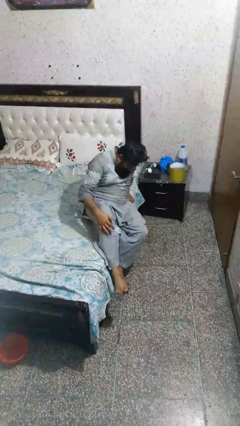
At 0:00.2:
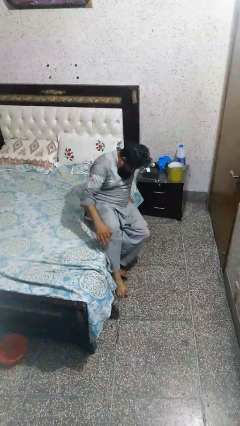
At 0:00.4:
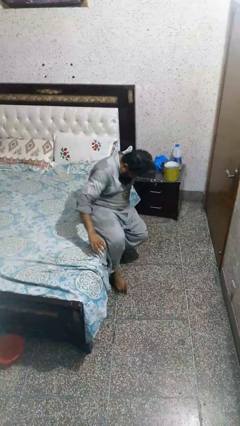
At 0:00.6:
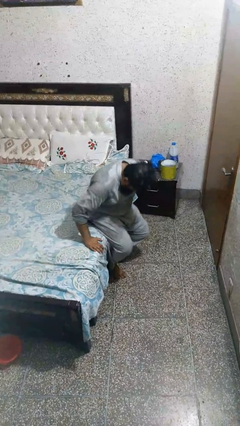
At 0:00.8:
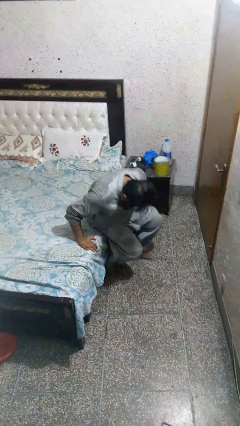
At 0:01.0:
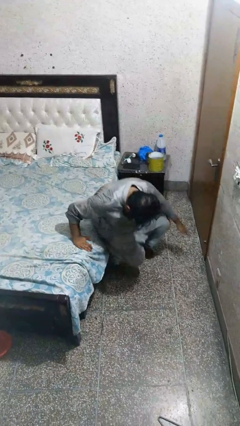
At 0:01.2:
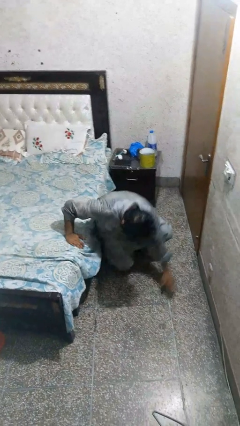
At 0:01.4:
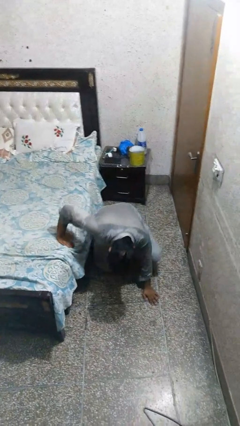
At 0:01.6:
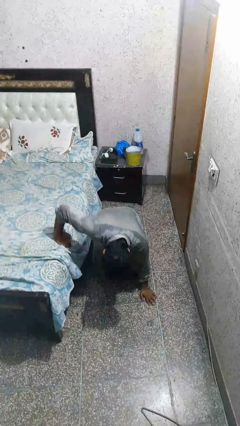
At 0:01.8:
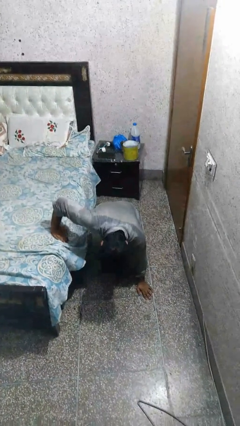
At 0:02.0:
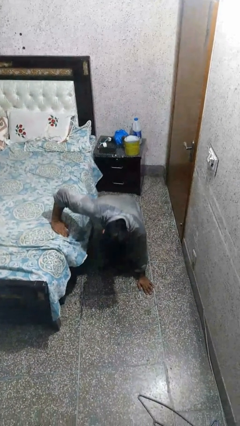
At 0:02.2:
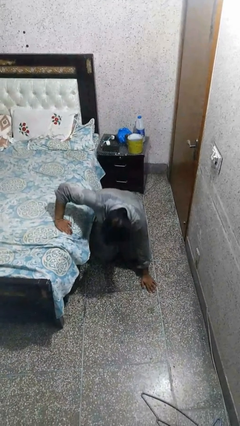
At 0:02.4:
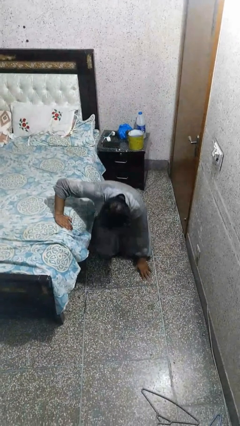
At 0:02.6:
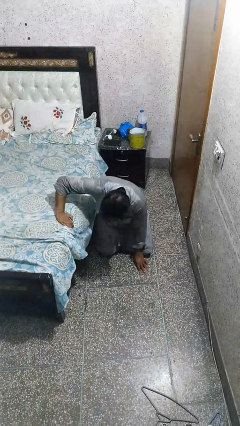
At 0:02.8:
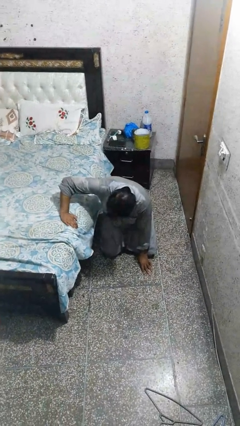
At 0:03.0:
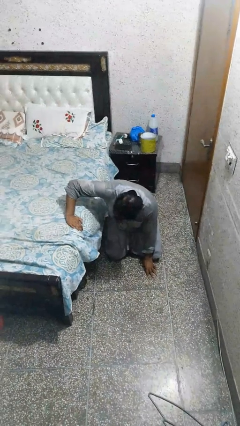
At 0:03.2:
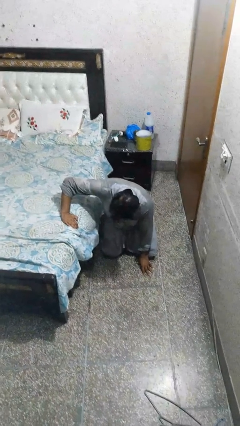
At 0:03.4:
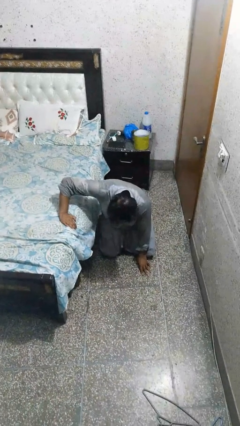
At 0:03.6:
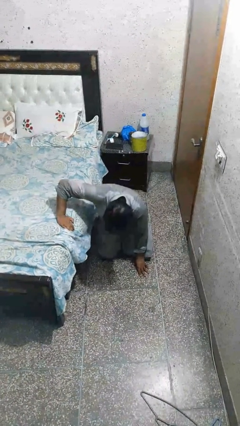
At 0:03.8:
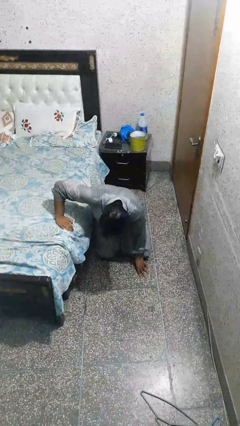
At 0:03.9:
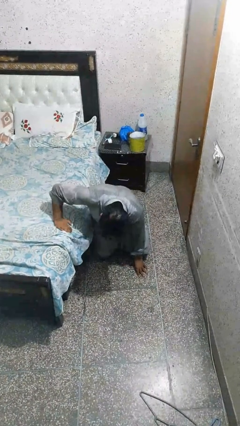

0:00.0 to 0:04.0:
person falls from bed

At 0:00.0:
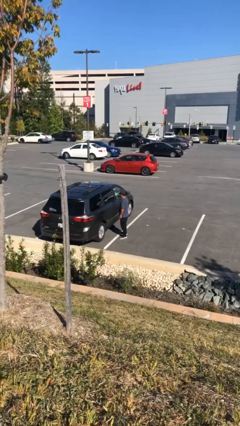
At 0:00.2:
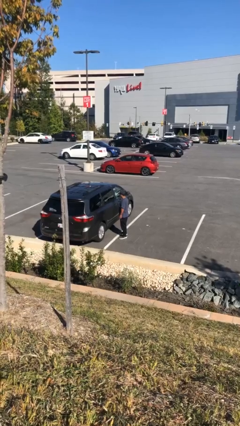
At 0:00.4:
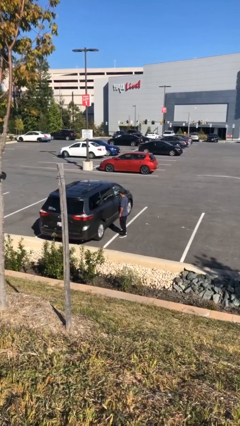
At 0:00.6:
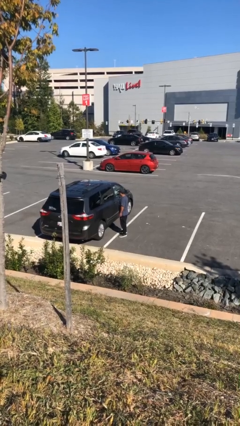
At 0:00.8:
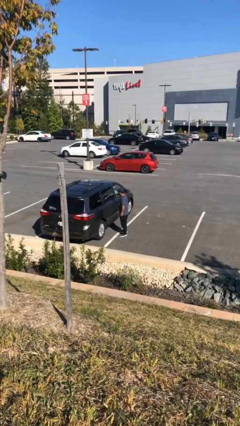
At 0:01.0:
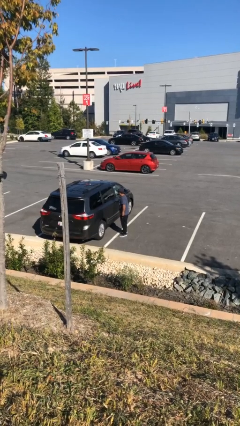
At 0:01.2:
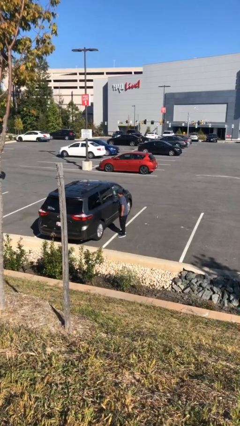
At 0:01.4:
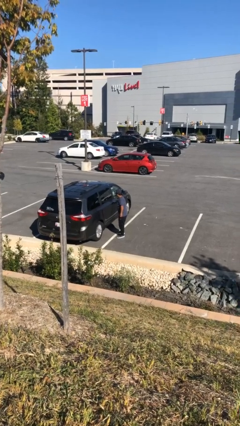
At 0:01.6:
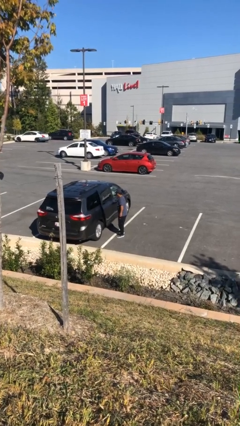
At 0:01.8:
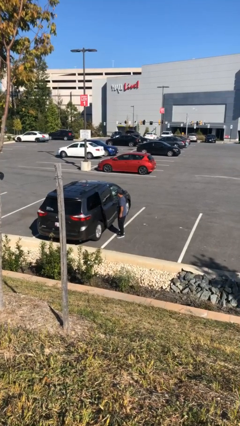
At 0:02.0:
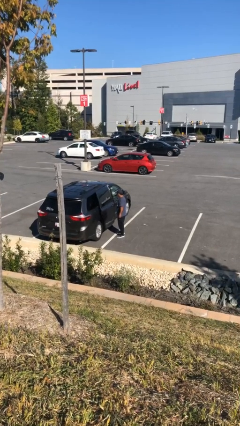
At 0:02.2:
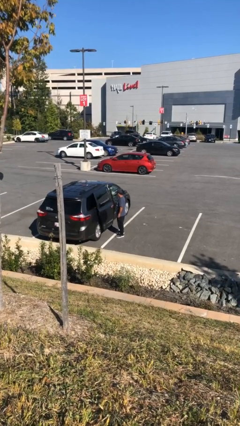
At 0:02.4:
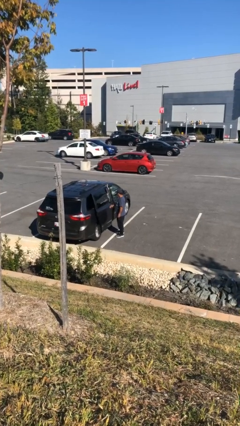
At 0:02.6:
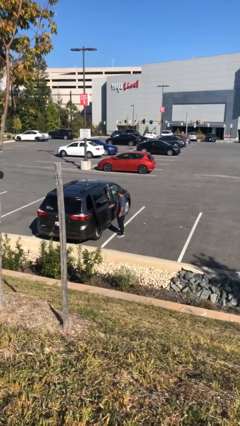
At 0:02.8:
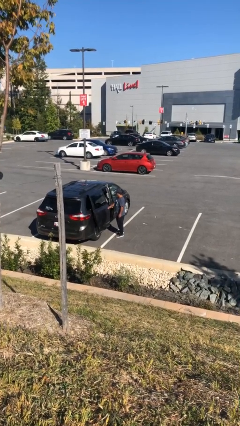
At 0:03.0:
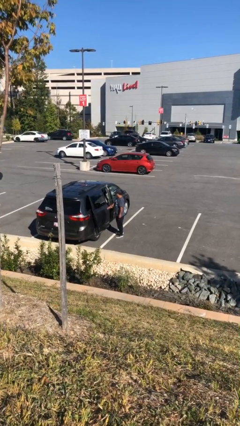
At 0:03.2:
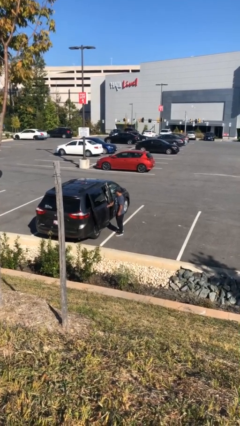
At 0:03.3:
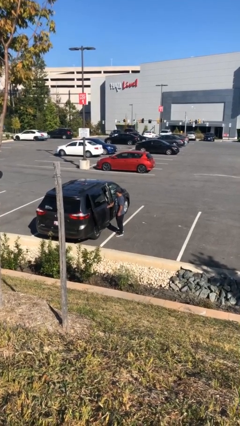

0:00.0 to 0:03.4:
person opens car door

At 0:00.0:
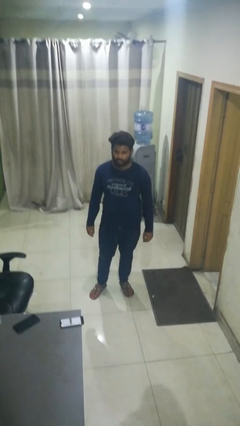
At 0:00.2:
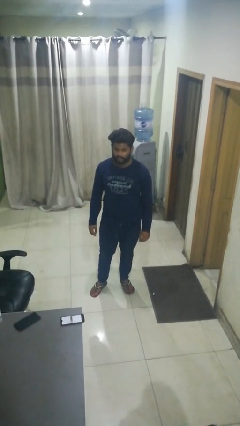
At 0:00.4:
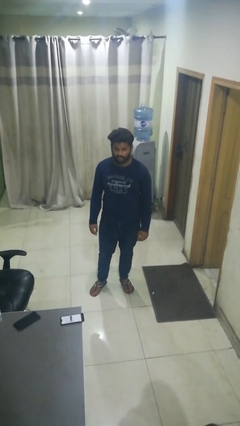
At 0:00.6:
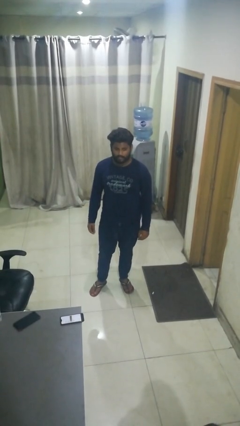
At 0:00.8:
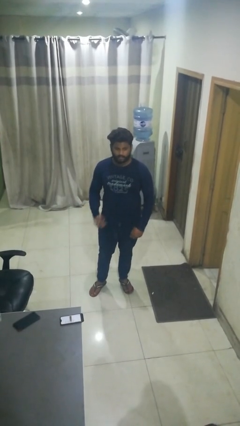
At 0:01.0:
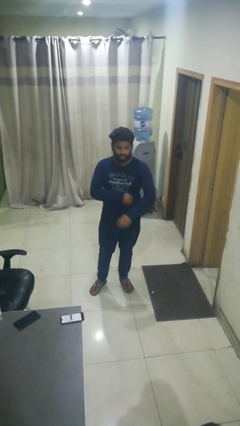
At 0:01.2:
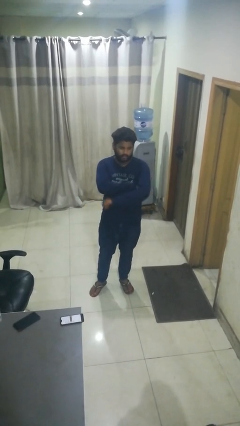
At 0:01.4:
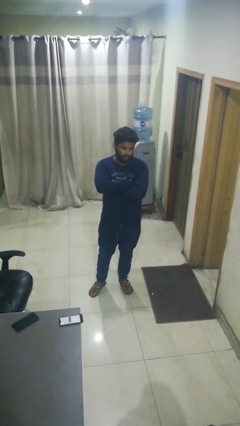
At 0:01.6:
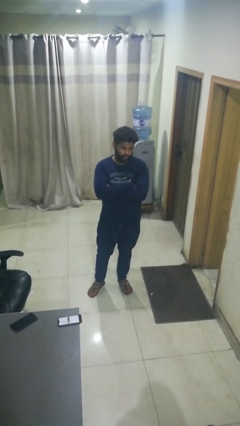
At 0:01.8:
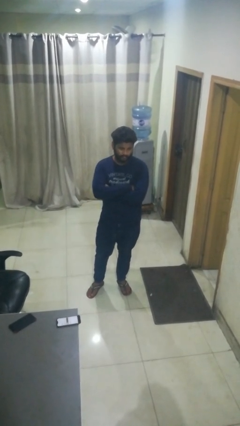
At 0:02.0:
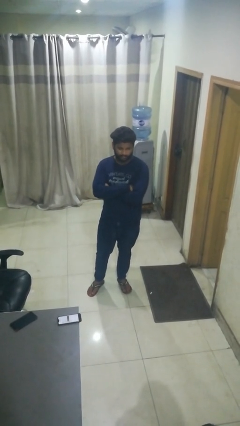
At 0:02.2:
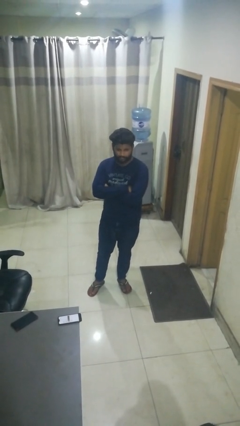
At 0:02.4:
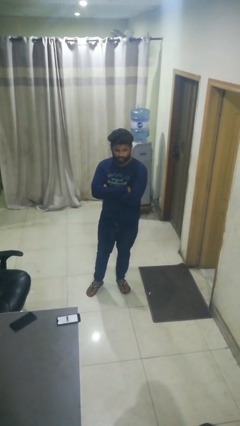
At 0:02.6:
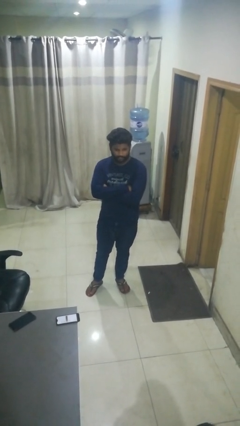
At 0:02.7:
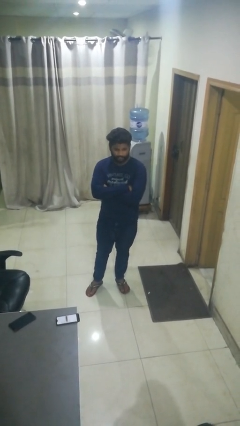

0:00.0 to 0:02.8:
person crosses arms

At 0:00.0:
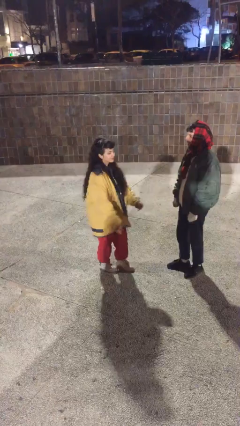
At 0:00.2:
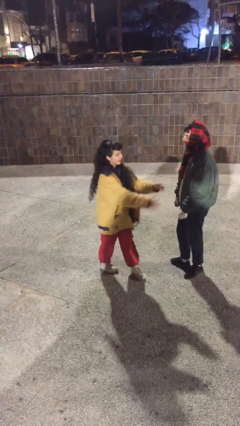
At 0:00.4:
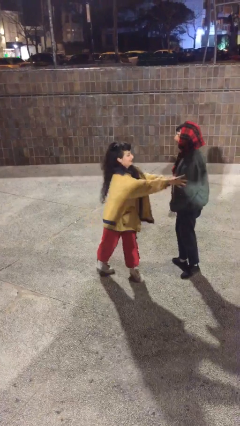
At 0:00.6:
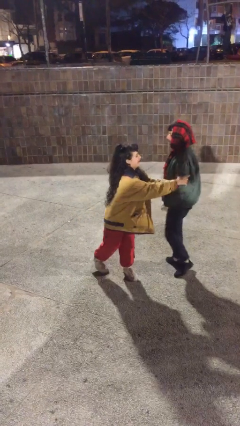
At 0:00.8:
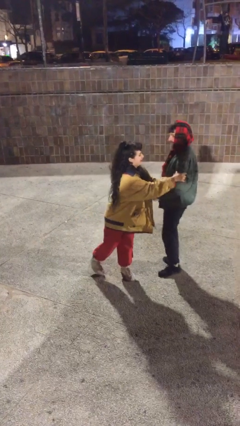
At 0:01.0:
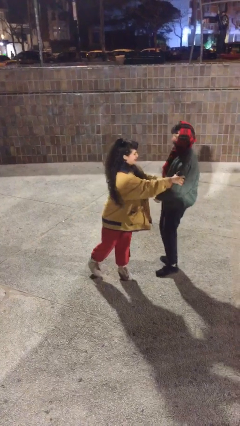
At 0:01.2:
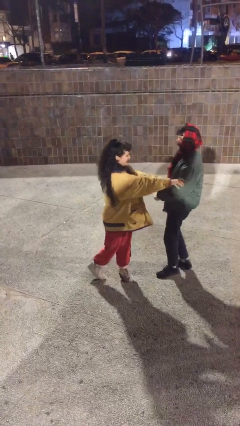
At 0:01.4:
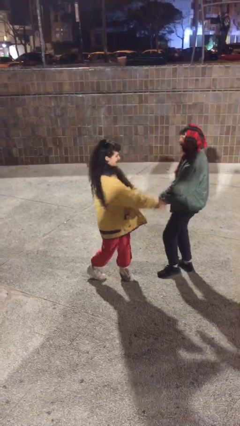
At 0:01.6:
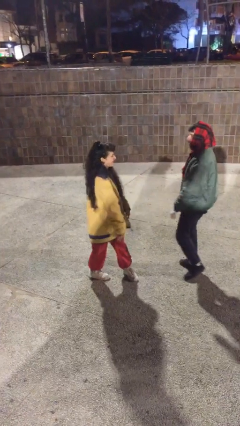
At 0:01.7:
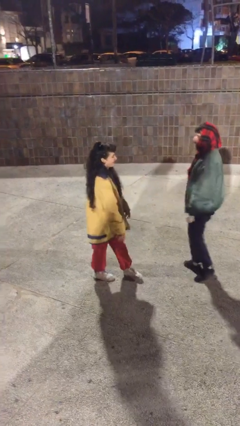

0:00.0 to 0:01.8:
person grabs person by bicep

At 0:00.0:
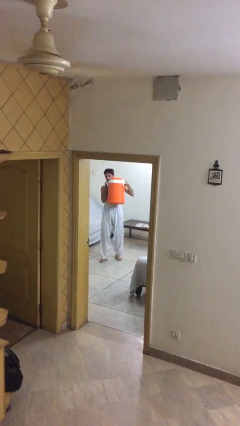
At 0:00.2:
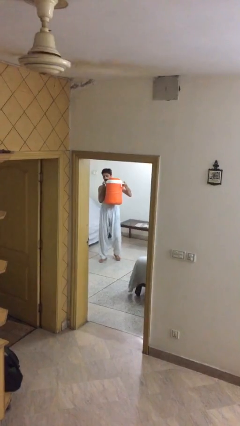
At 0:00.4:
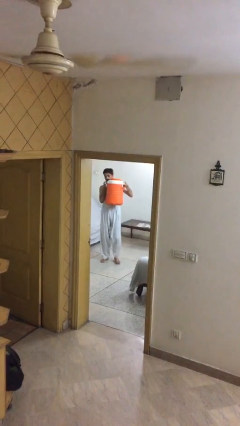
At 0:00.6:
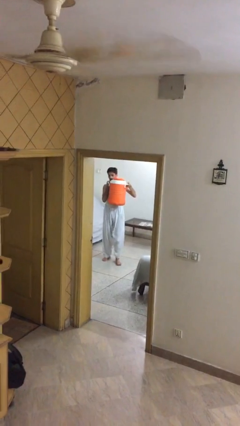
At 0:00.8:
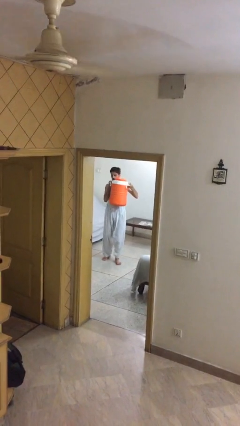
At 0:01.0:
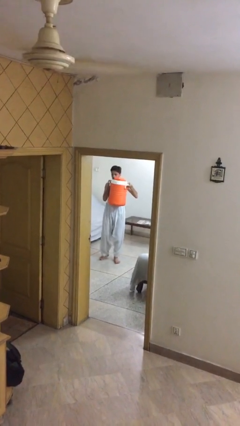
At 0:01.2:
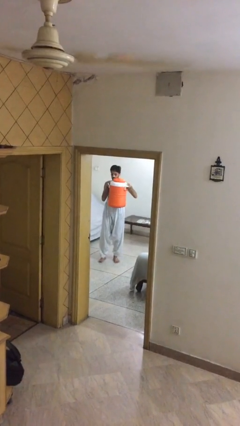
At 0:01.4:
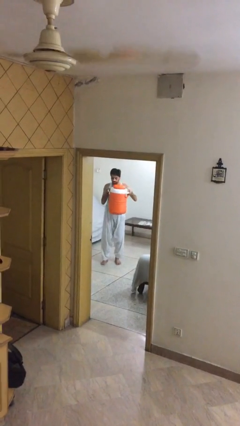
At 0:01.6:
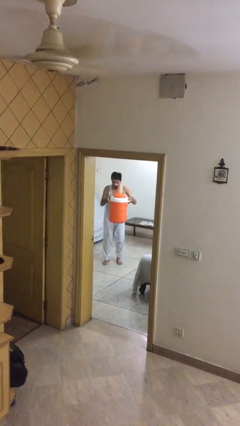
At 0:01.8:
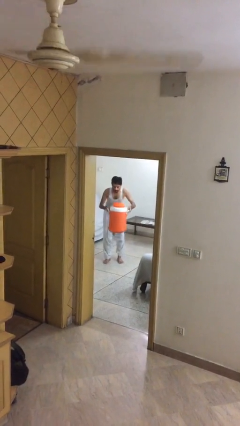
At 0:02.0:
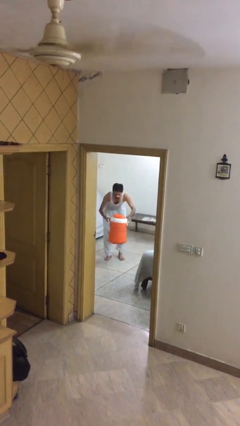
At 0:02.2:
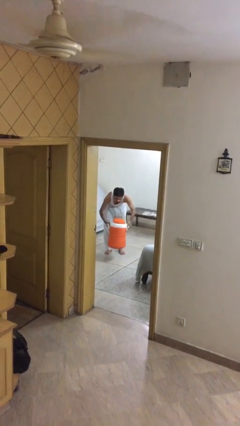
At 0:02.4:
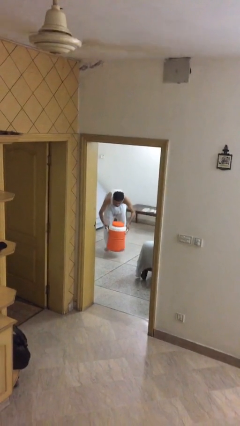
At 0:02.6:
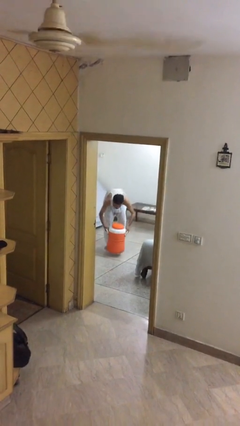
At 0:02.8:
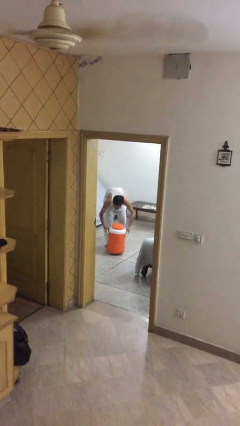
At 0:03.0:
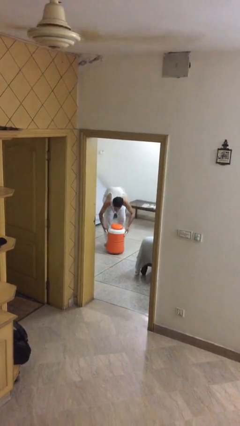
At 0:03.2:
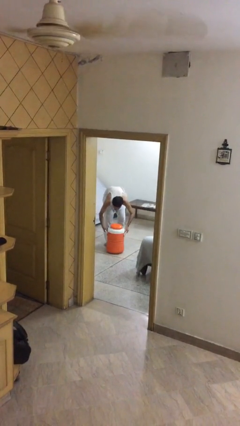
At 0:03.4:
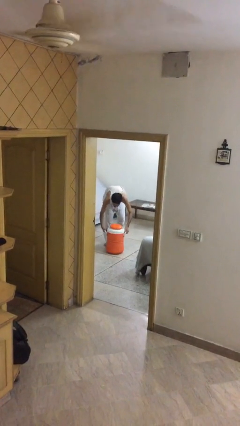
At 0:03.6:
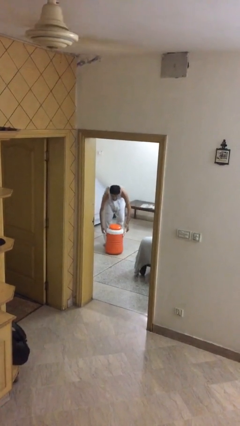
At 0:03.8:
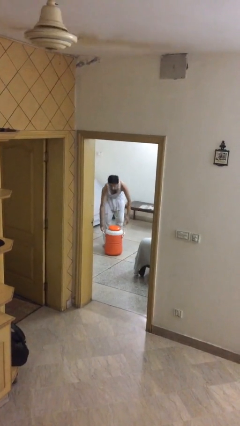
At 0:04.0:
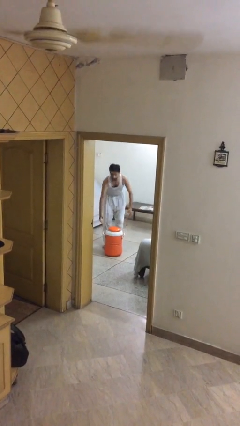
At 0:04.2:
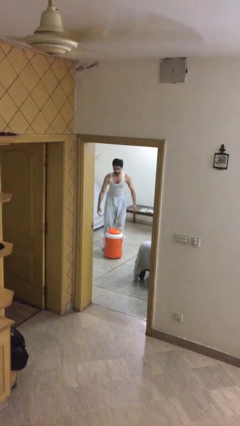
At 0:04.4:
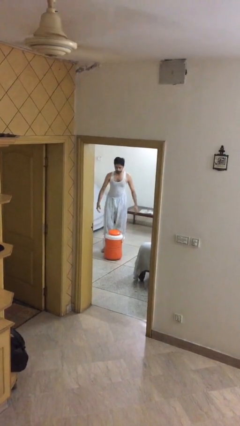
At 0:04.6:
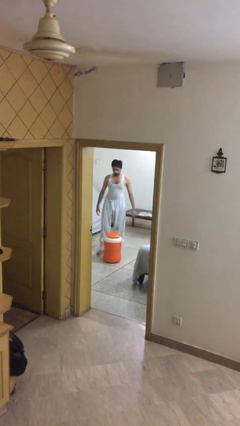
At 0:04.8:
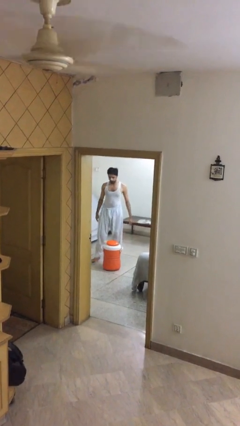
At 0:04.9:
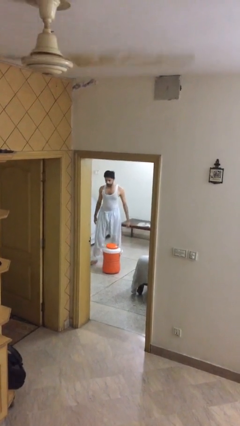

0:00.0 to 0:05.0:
person puts down object on floor

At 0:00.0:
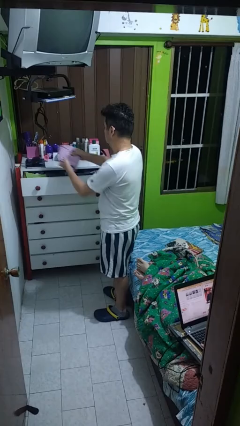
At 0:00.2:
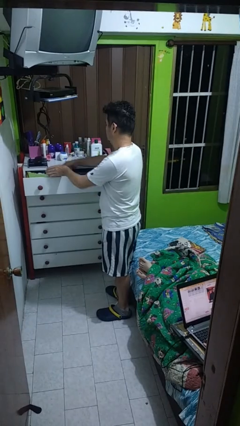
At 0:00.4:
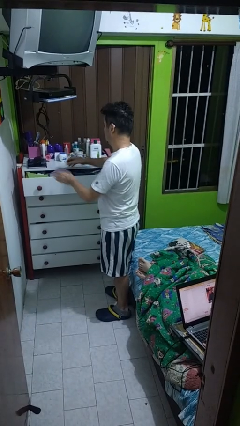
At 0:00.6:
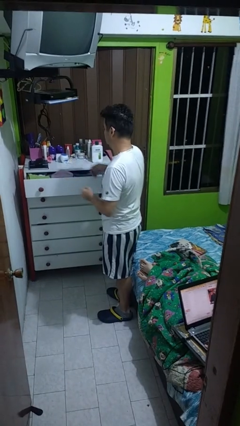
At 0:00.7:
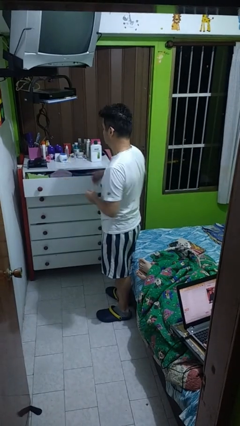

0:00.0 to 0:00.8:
person puts clothes into dresser
